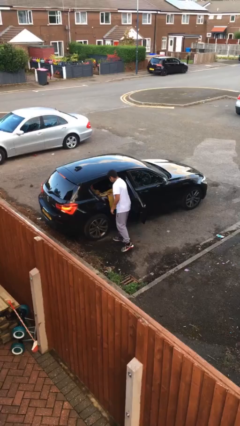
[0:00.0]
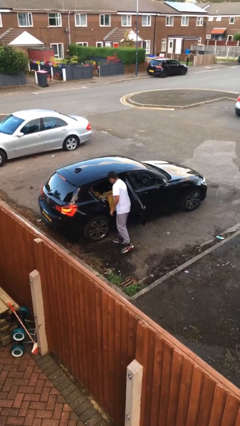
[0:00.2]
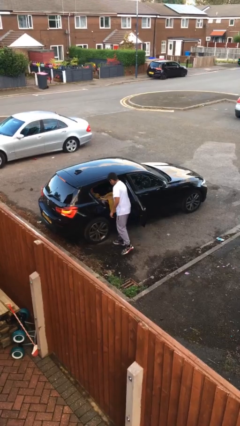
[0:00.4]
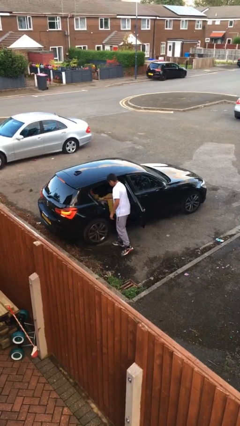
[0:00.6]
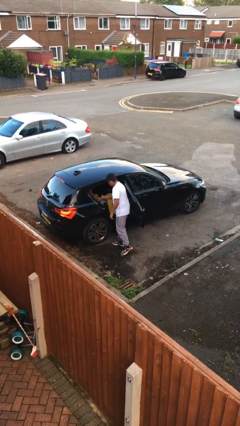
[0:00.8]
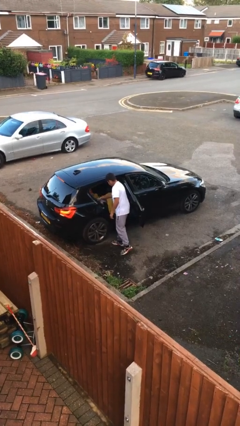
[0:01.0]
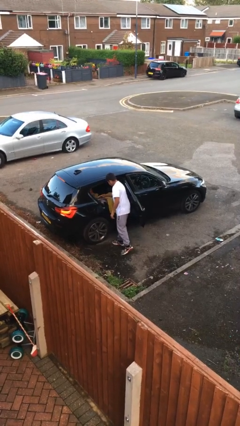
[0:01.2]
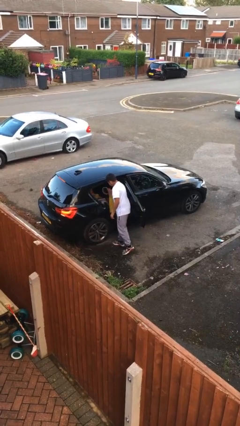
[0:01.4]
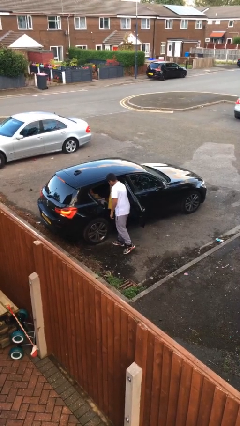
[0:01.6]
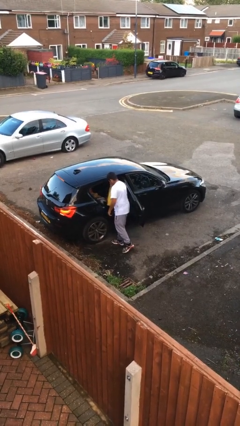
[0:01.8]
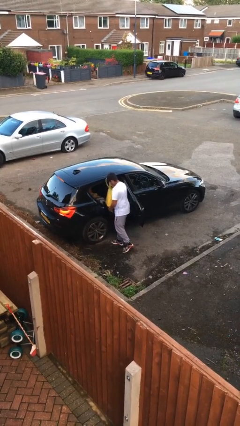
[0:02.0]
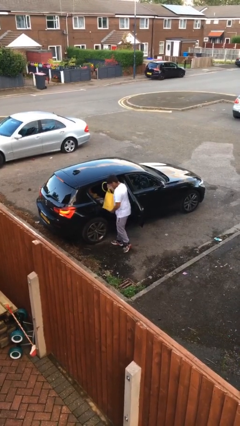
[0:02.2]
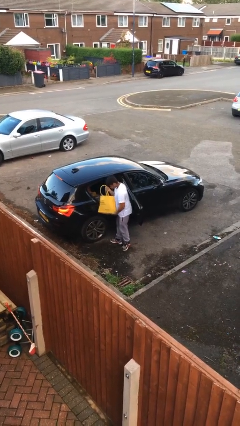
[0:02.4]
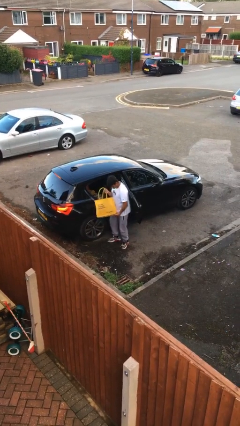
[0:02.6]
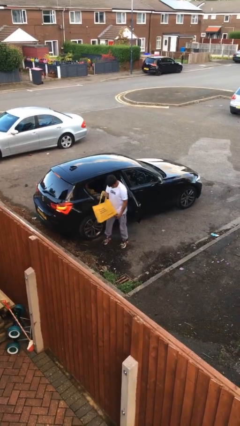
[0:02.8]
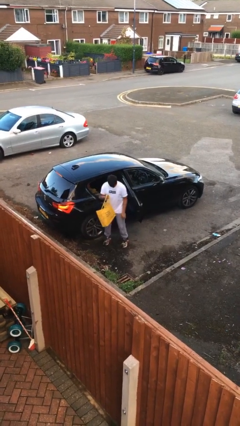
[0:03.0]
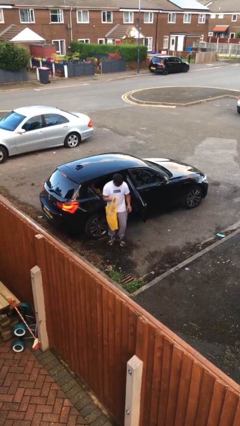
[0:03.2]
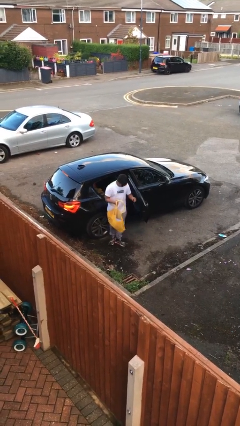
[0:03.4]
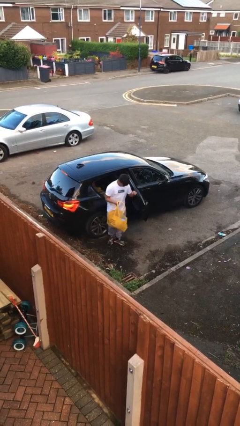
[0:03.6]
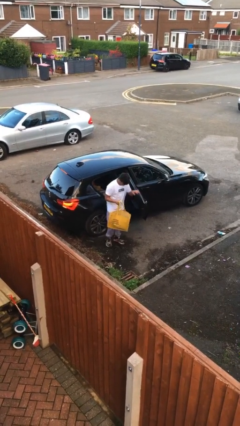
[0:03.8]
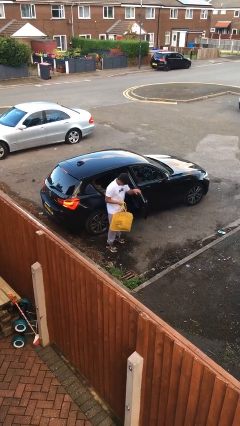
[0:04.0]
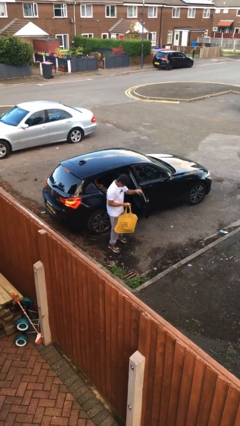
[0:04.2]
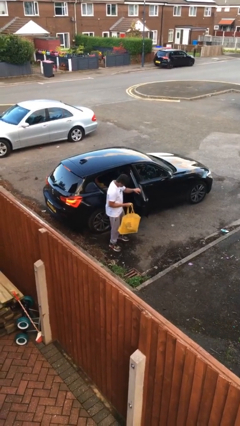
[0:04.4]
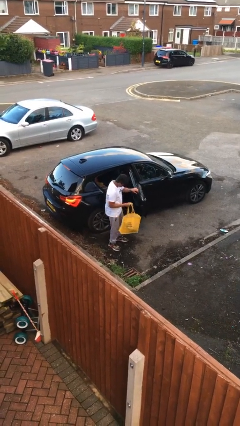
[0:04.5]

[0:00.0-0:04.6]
person unloads car

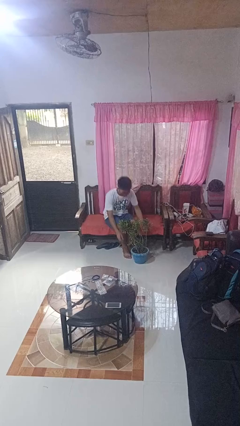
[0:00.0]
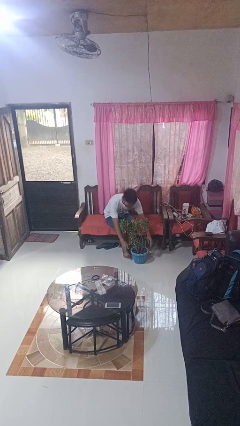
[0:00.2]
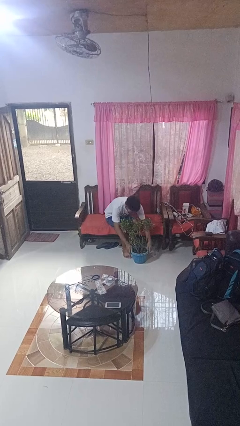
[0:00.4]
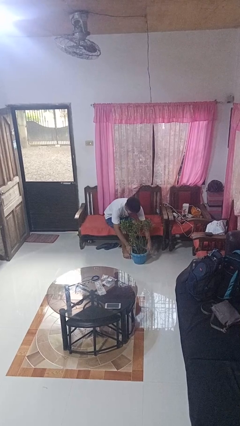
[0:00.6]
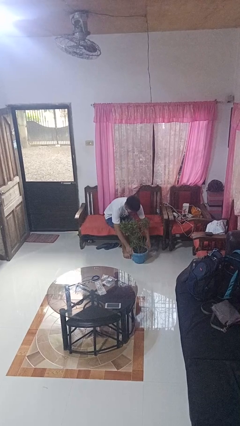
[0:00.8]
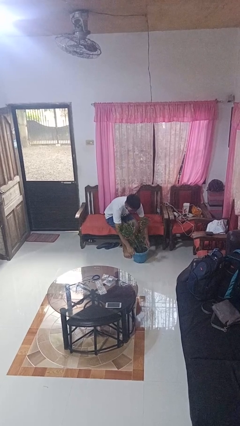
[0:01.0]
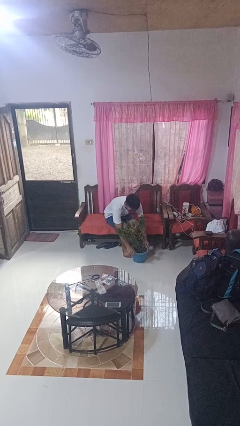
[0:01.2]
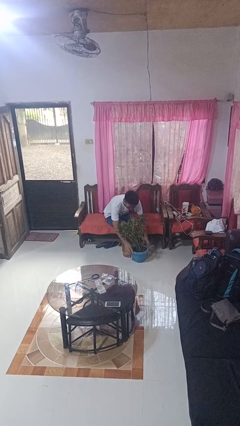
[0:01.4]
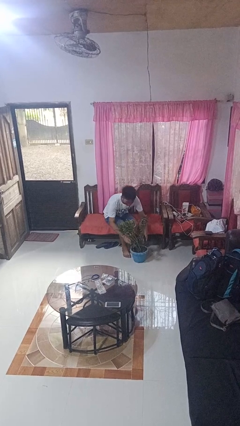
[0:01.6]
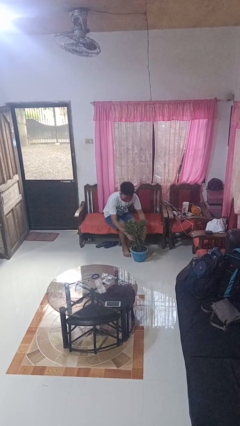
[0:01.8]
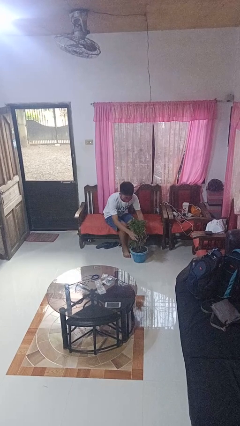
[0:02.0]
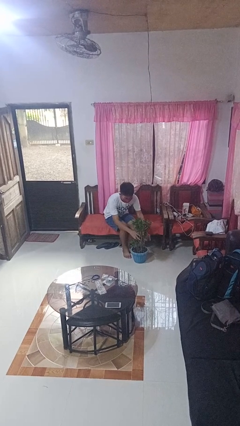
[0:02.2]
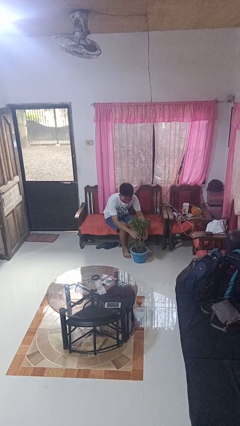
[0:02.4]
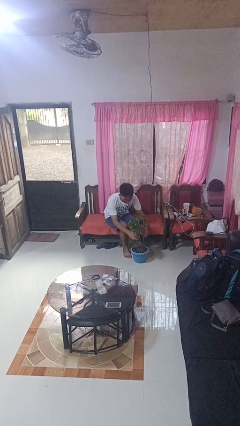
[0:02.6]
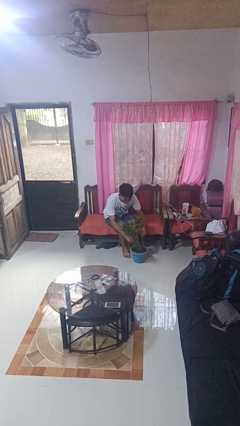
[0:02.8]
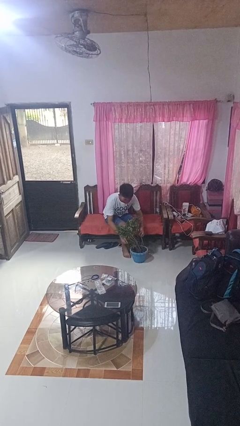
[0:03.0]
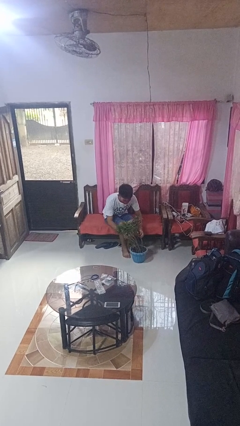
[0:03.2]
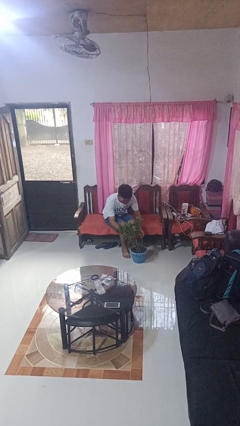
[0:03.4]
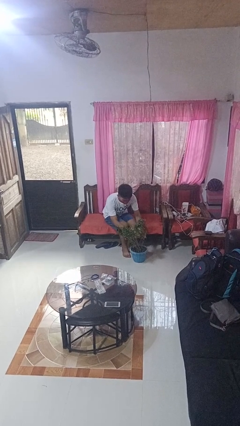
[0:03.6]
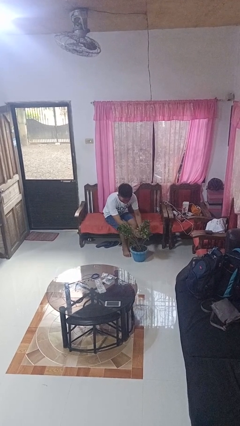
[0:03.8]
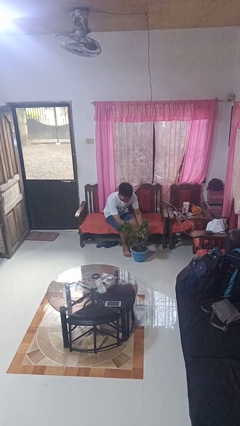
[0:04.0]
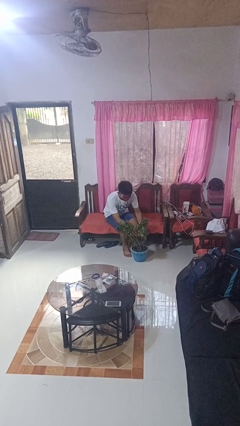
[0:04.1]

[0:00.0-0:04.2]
person arranges flowers in vase

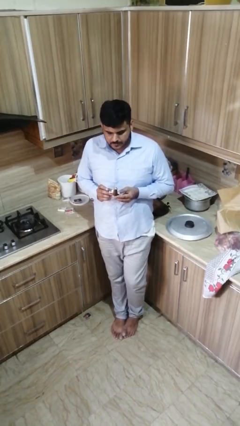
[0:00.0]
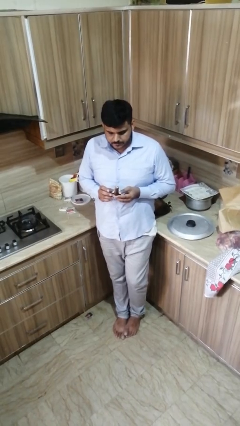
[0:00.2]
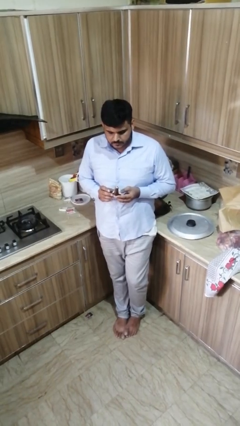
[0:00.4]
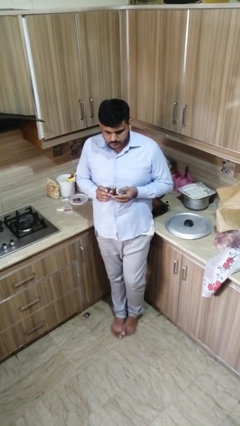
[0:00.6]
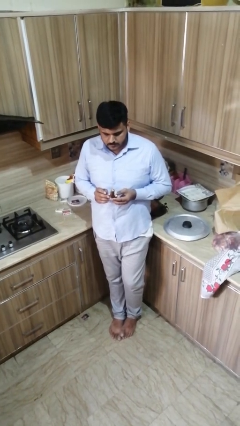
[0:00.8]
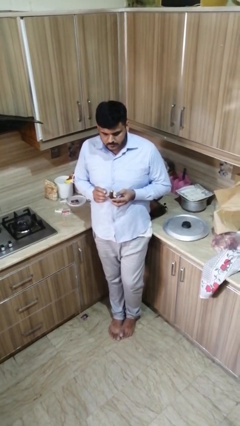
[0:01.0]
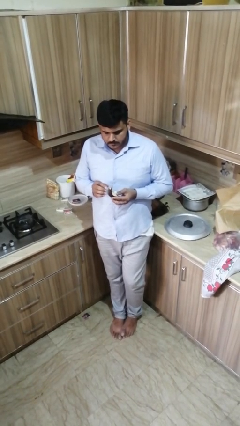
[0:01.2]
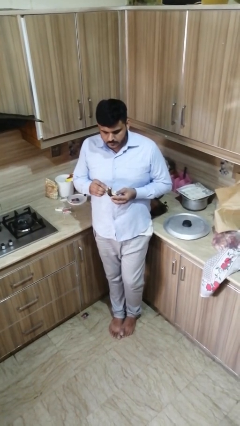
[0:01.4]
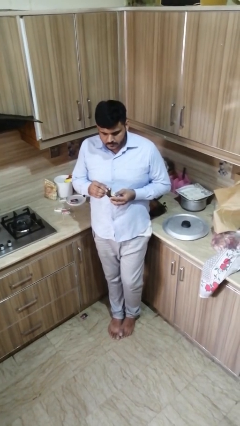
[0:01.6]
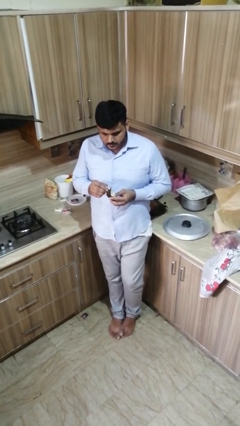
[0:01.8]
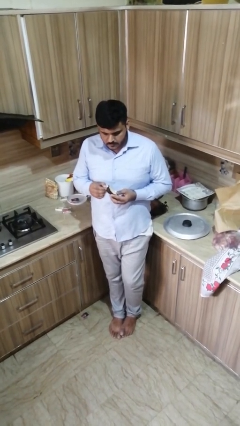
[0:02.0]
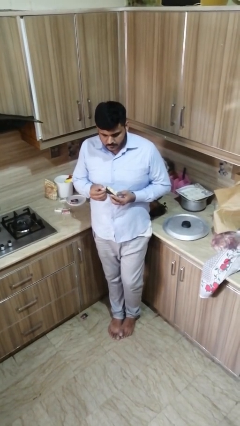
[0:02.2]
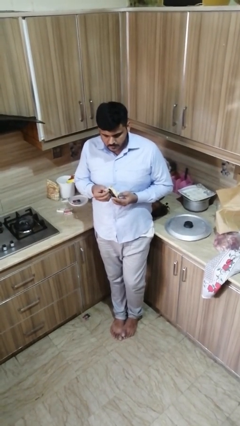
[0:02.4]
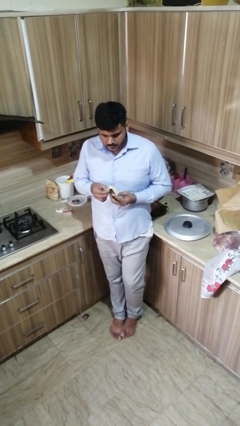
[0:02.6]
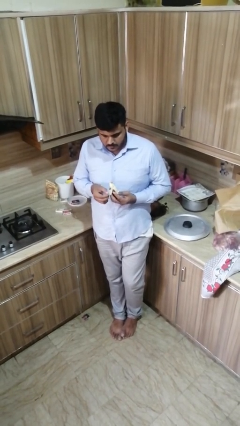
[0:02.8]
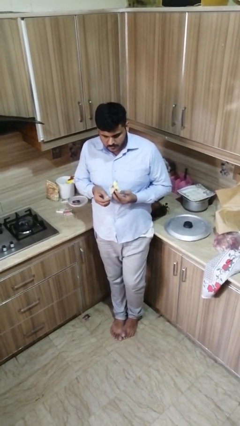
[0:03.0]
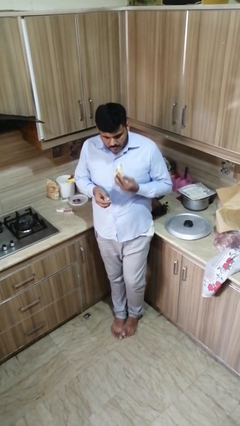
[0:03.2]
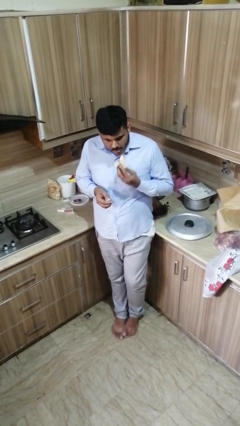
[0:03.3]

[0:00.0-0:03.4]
person eats banana

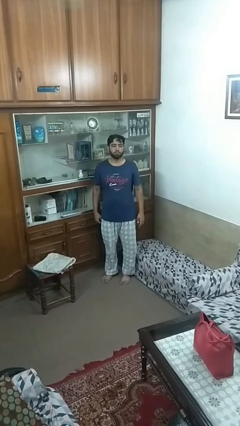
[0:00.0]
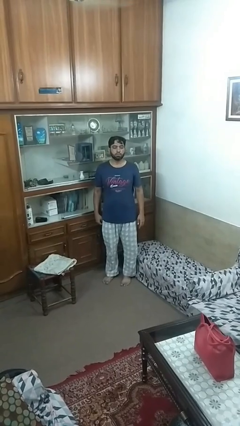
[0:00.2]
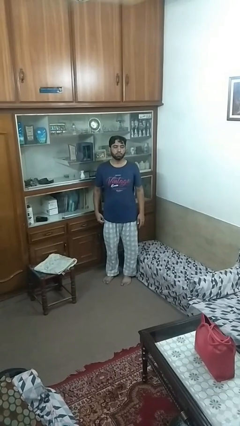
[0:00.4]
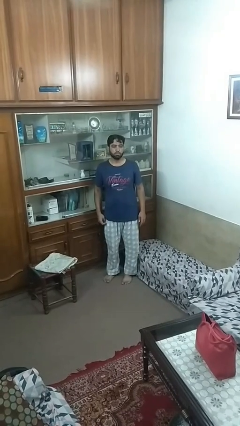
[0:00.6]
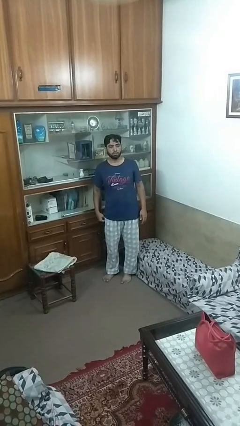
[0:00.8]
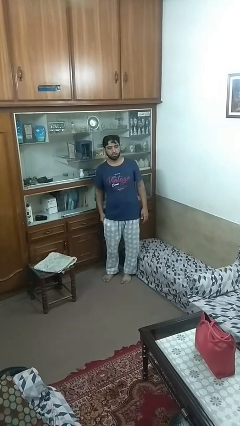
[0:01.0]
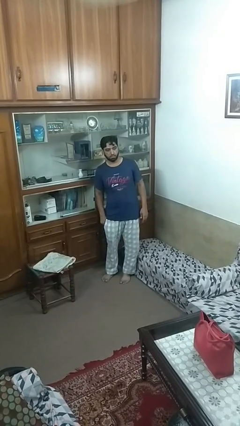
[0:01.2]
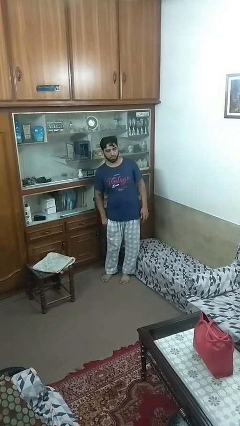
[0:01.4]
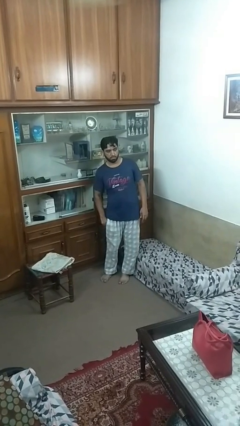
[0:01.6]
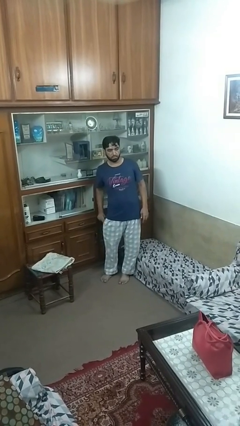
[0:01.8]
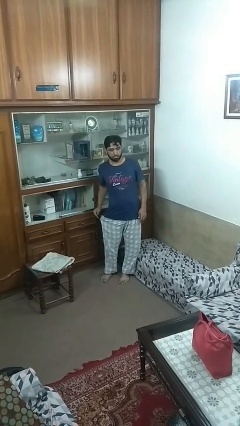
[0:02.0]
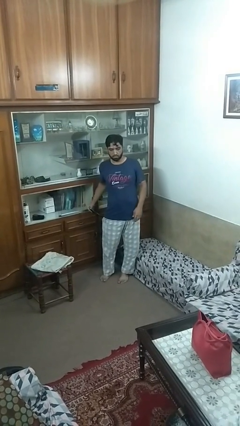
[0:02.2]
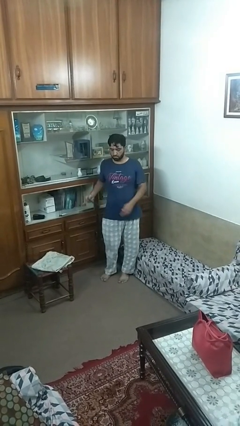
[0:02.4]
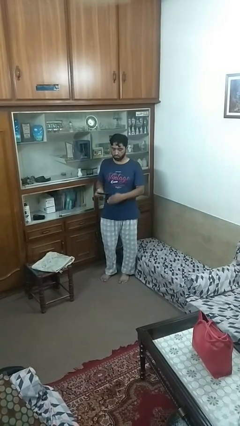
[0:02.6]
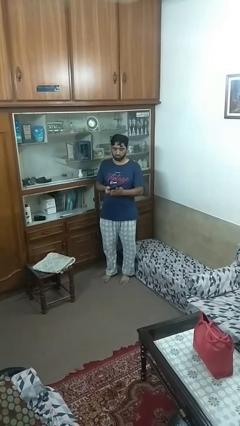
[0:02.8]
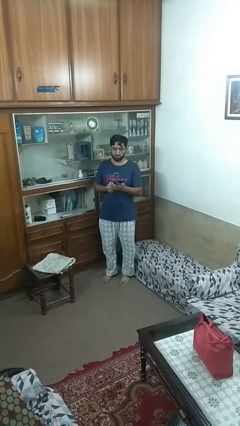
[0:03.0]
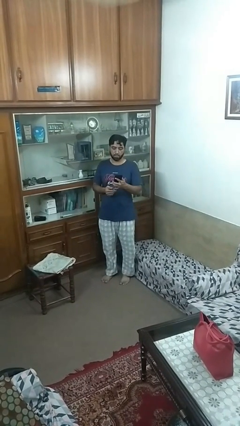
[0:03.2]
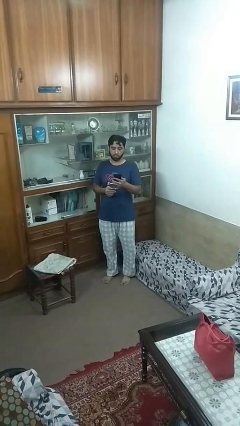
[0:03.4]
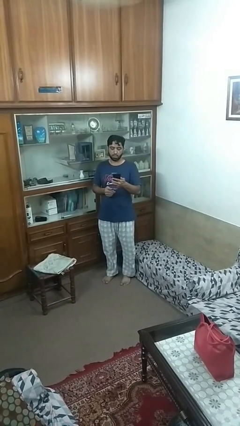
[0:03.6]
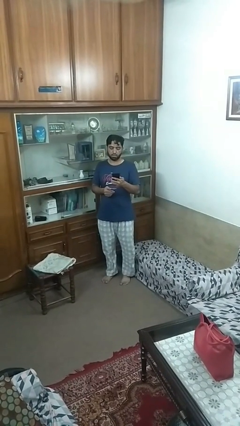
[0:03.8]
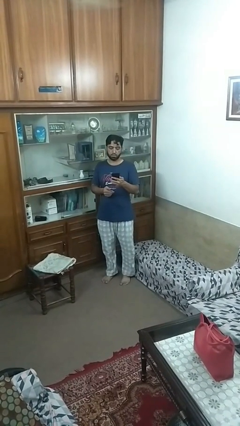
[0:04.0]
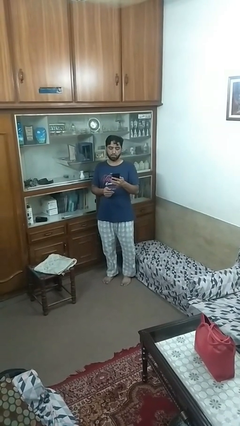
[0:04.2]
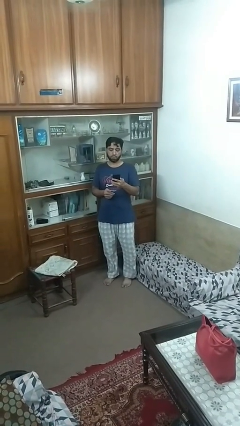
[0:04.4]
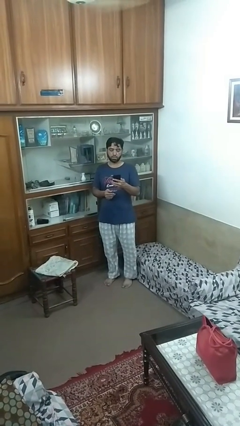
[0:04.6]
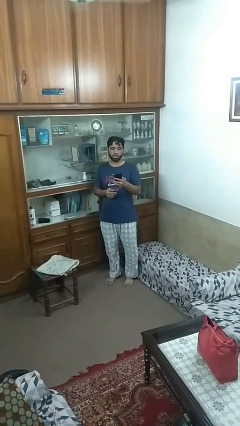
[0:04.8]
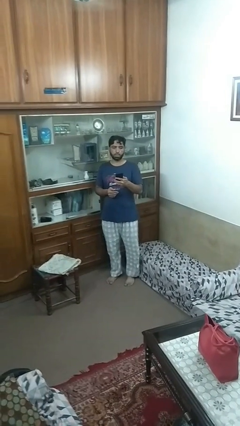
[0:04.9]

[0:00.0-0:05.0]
person takes phone from pocket

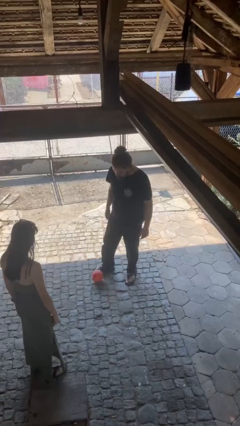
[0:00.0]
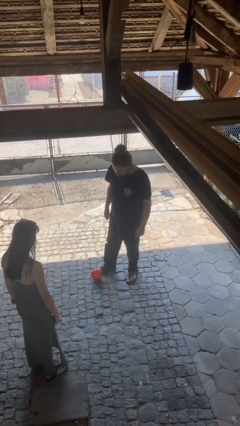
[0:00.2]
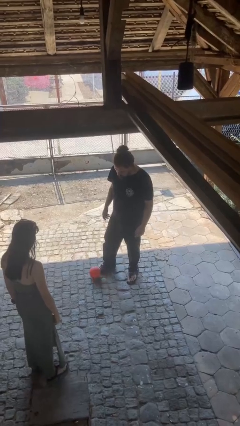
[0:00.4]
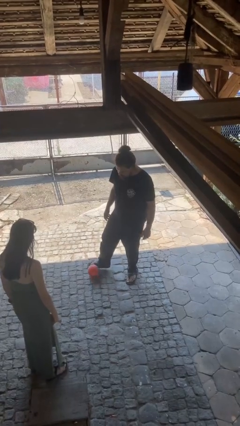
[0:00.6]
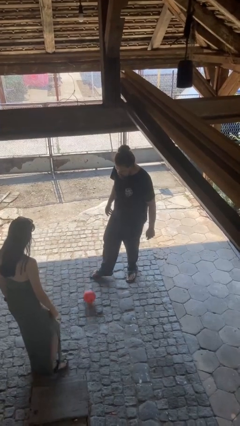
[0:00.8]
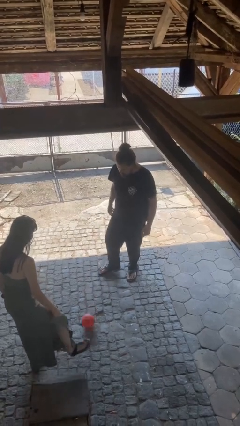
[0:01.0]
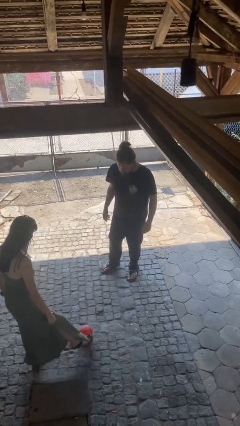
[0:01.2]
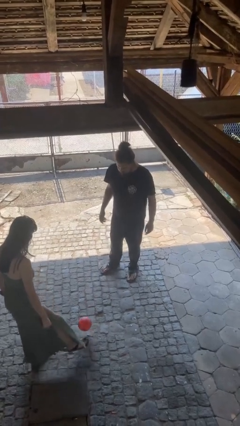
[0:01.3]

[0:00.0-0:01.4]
person kicks object to person
